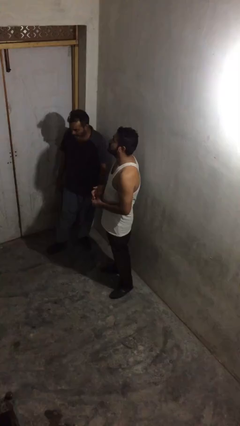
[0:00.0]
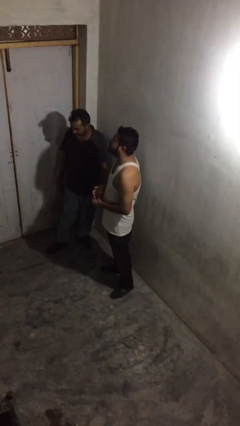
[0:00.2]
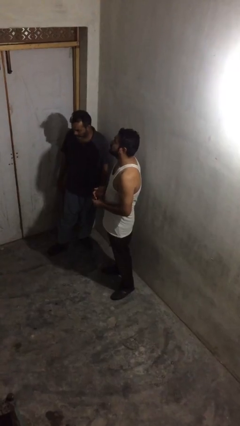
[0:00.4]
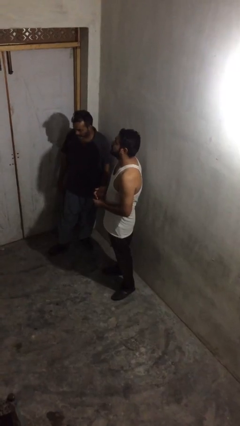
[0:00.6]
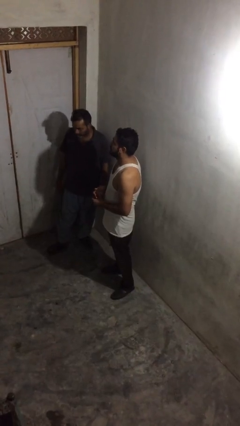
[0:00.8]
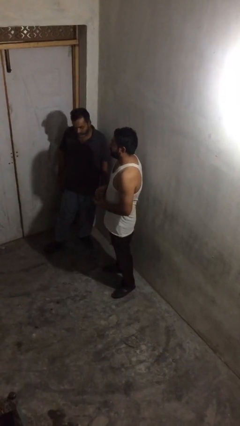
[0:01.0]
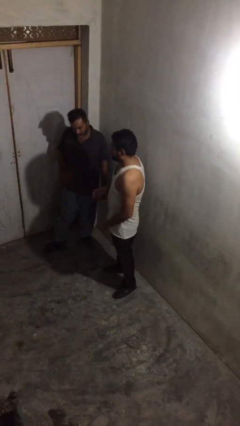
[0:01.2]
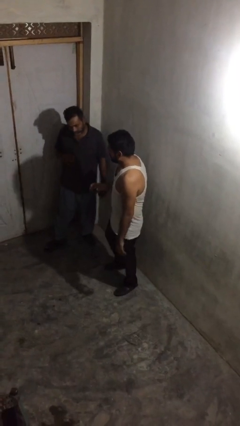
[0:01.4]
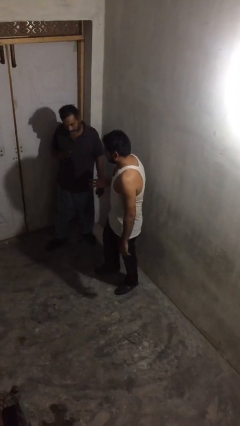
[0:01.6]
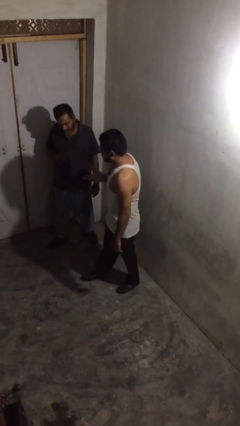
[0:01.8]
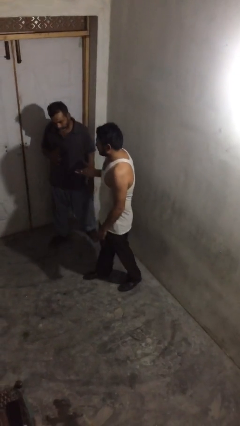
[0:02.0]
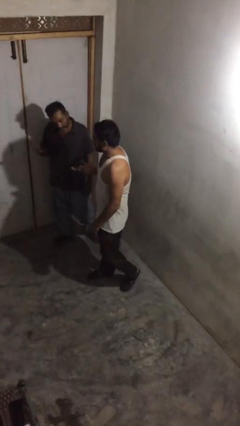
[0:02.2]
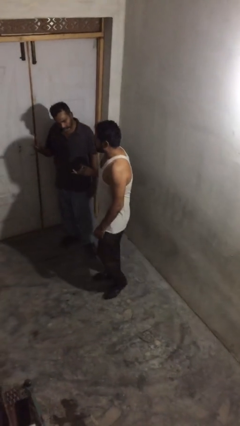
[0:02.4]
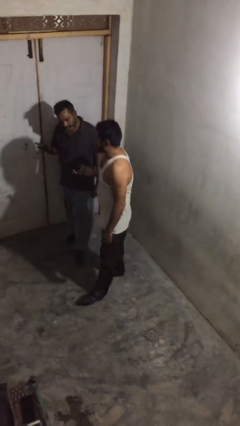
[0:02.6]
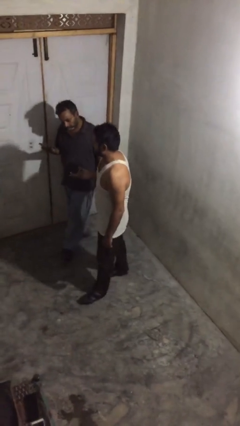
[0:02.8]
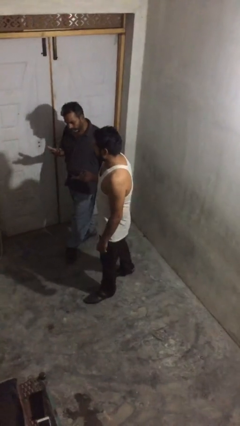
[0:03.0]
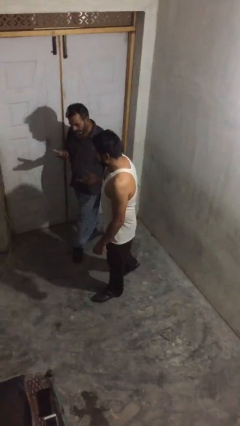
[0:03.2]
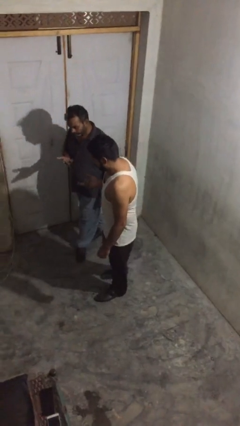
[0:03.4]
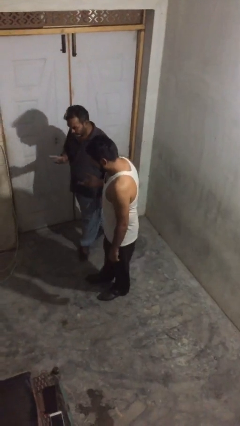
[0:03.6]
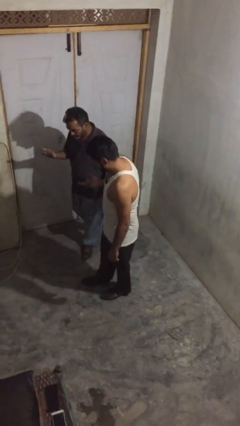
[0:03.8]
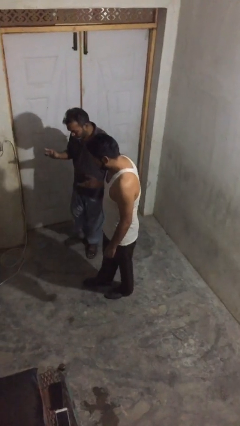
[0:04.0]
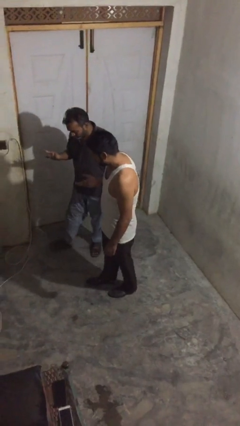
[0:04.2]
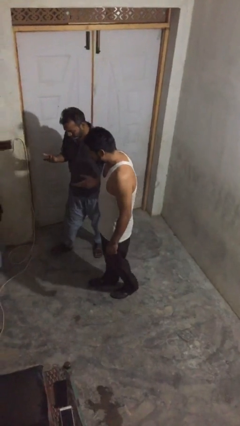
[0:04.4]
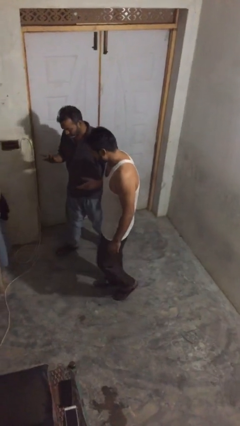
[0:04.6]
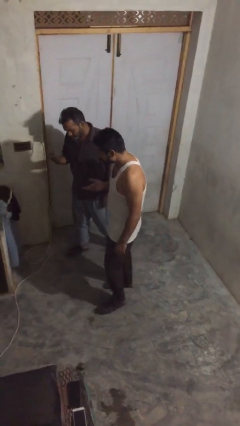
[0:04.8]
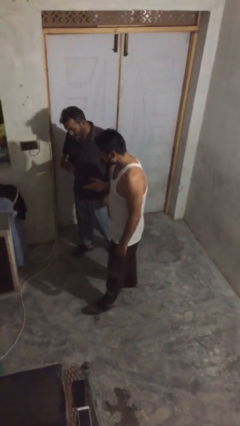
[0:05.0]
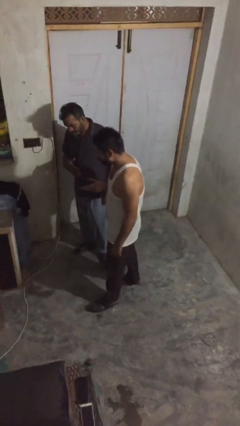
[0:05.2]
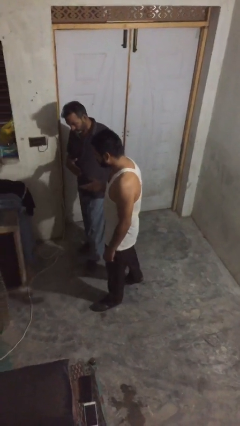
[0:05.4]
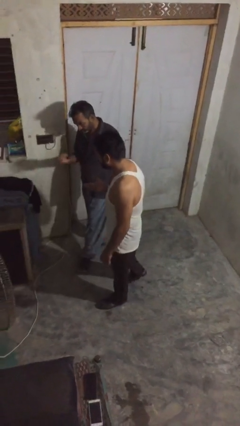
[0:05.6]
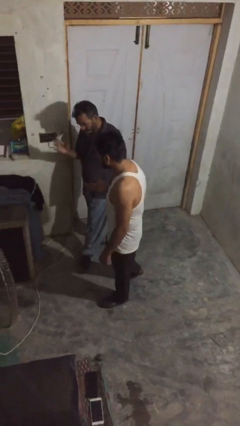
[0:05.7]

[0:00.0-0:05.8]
person talks to person

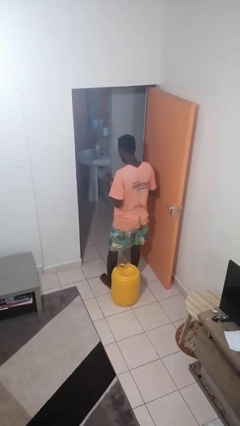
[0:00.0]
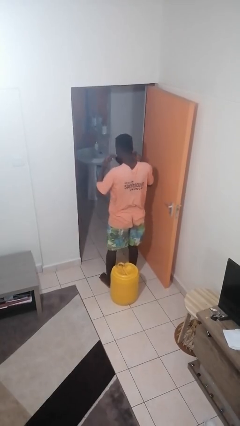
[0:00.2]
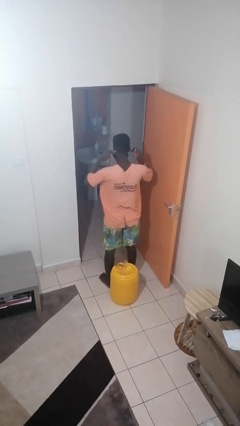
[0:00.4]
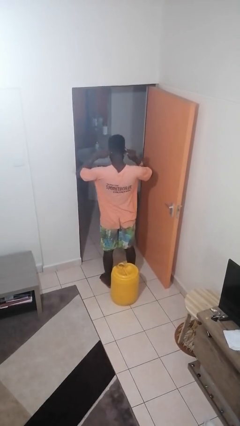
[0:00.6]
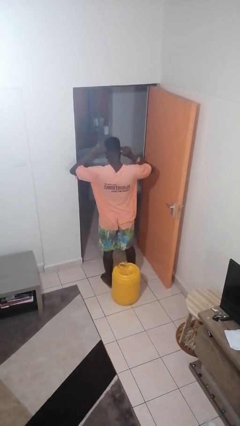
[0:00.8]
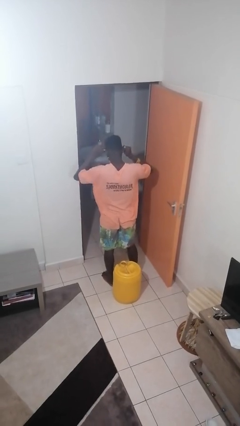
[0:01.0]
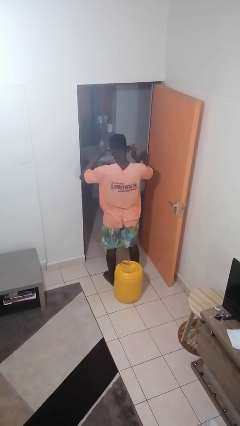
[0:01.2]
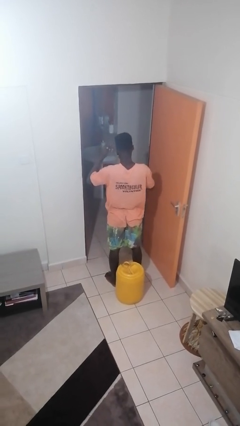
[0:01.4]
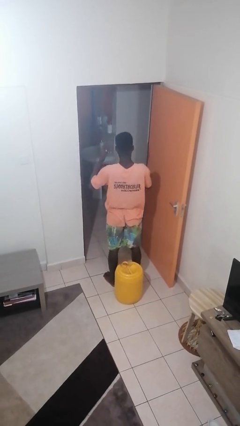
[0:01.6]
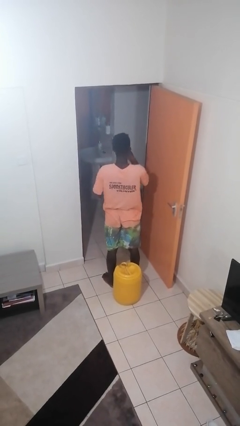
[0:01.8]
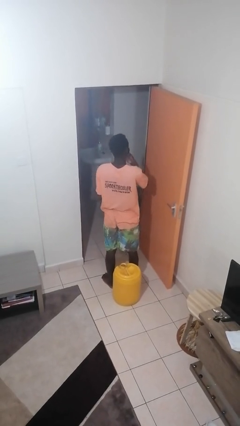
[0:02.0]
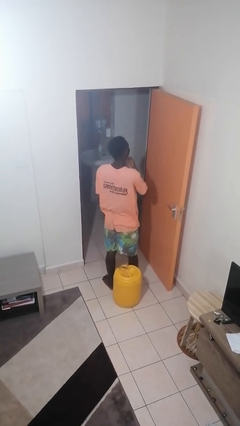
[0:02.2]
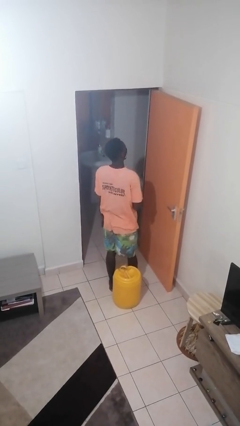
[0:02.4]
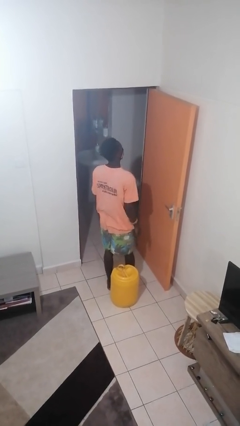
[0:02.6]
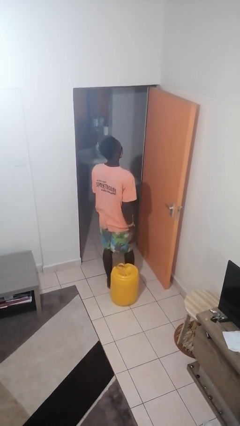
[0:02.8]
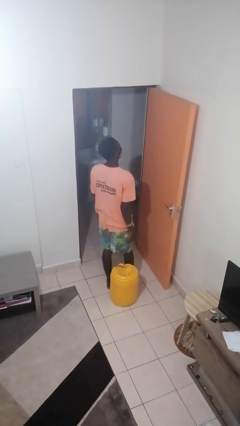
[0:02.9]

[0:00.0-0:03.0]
person puts on facemask

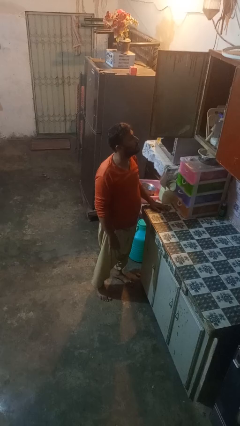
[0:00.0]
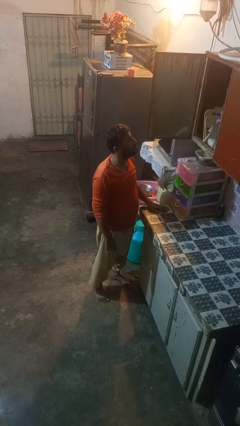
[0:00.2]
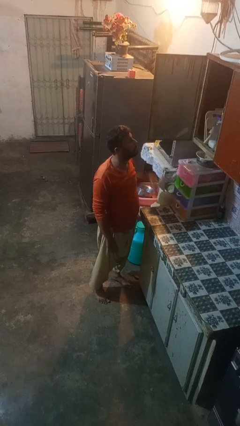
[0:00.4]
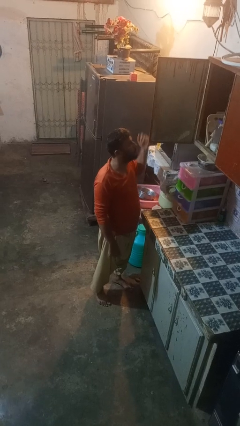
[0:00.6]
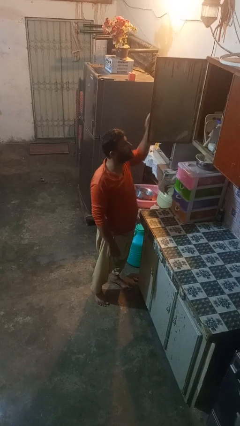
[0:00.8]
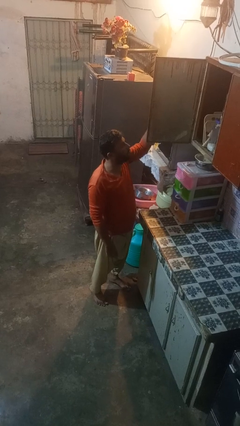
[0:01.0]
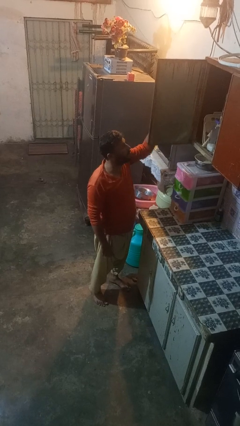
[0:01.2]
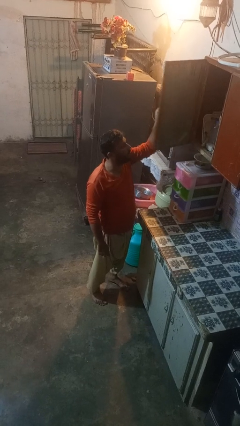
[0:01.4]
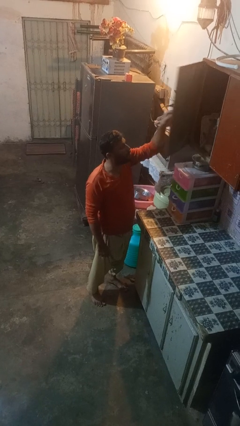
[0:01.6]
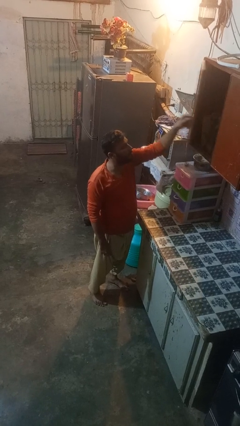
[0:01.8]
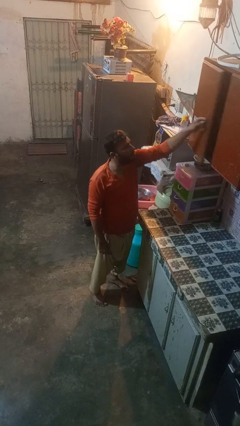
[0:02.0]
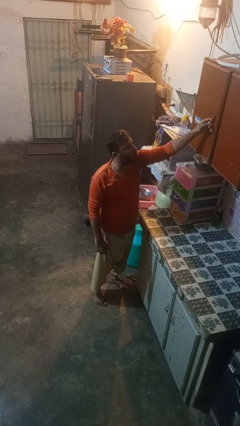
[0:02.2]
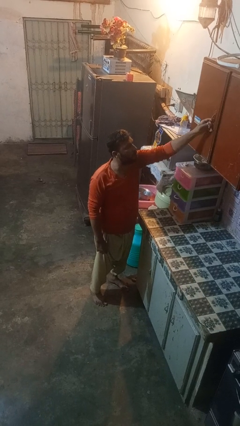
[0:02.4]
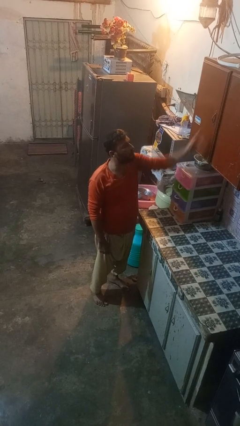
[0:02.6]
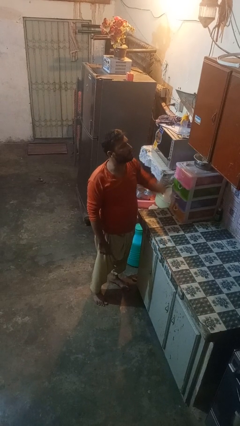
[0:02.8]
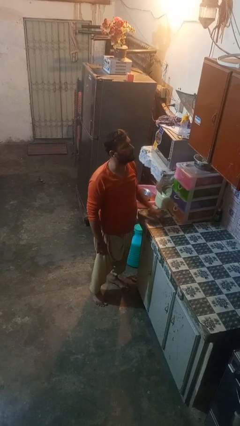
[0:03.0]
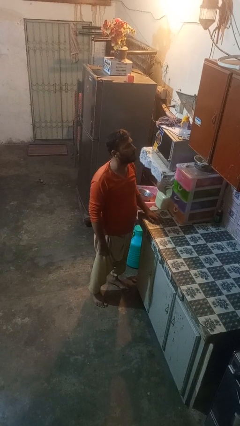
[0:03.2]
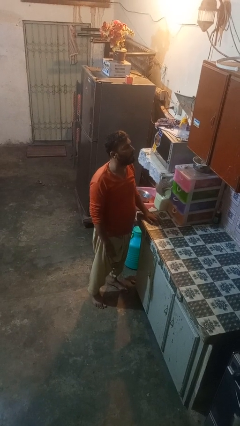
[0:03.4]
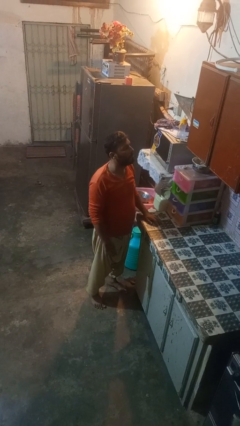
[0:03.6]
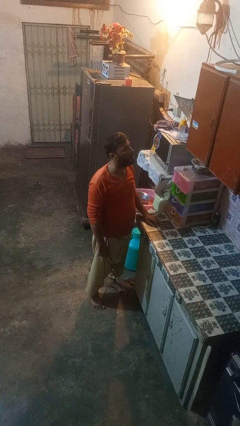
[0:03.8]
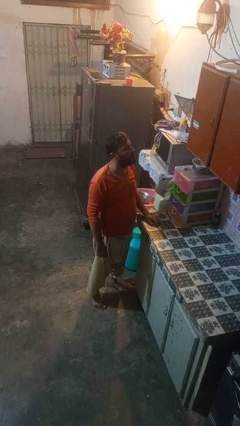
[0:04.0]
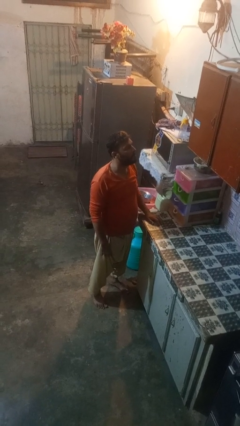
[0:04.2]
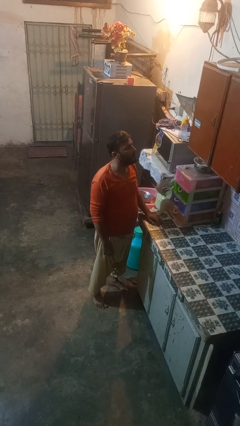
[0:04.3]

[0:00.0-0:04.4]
person closes cabinet

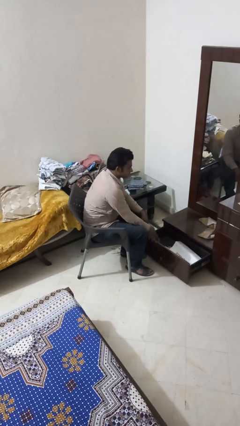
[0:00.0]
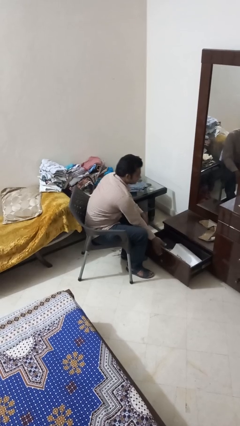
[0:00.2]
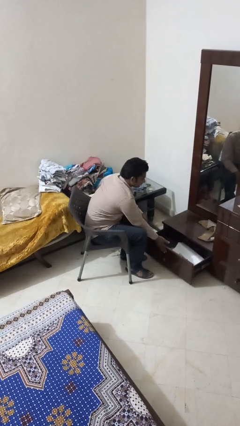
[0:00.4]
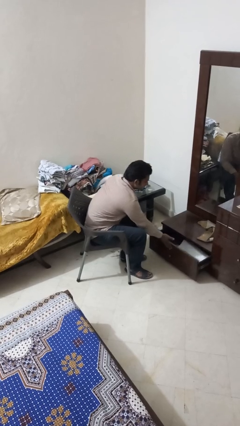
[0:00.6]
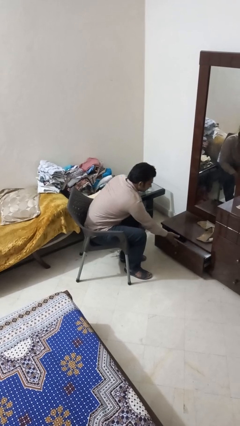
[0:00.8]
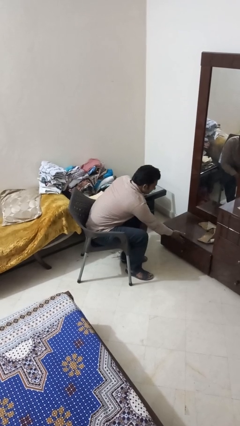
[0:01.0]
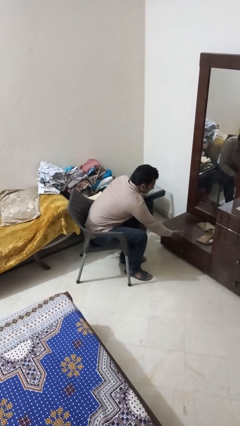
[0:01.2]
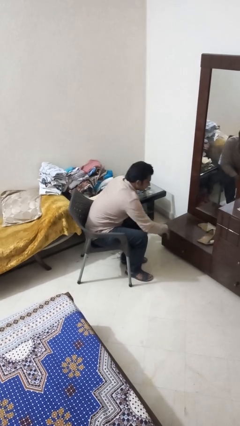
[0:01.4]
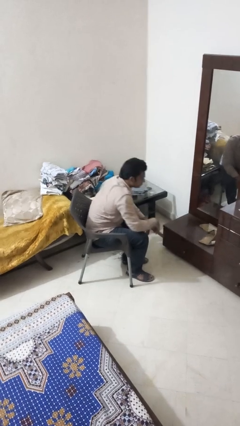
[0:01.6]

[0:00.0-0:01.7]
person closes dresser drawer

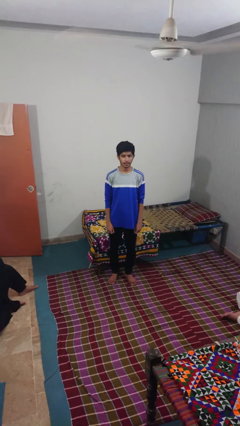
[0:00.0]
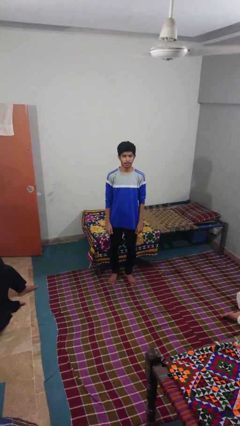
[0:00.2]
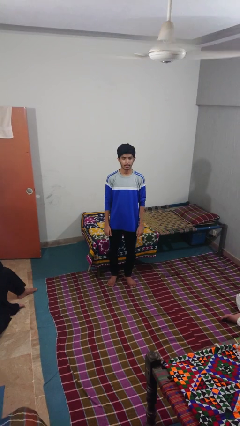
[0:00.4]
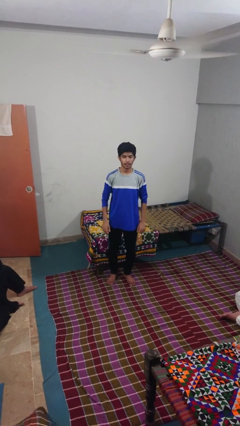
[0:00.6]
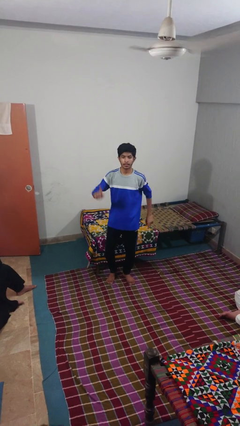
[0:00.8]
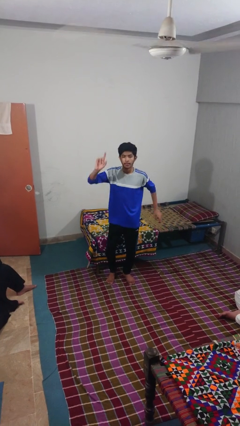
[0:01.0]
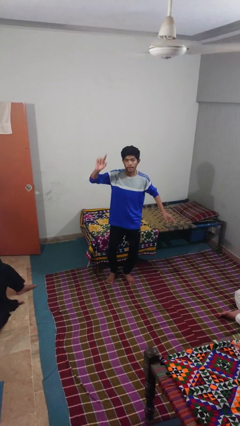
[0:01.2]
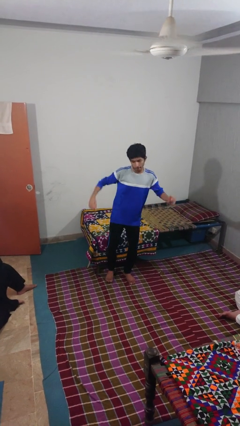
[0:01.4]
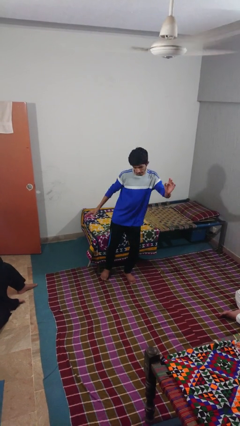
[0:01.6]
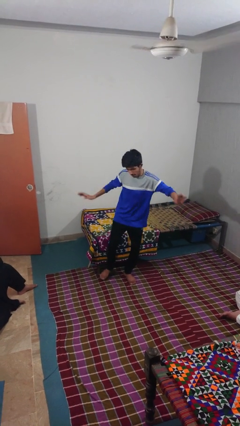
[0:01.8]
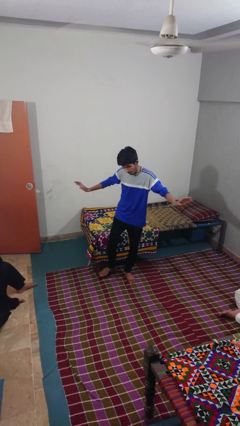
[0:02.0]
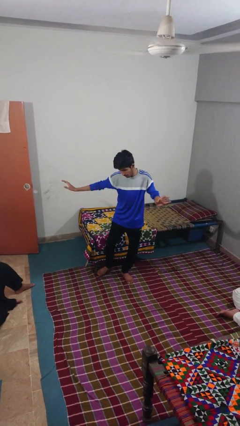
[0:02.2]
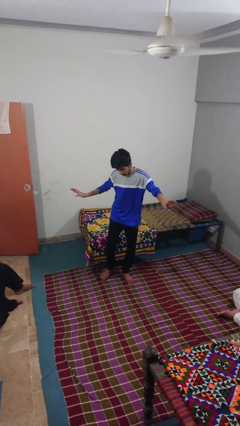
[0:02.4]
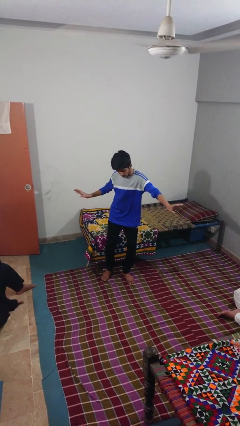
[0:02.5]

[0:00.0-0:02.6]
person dances in place

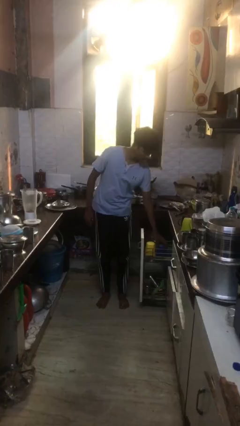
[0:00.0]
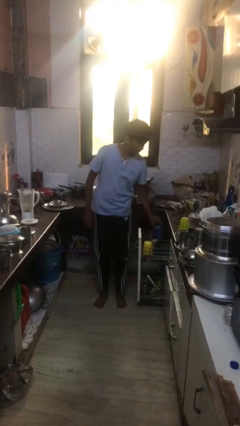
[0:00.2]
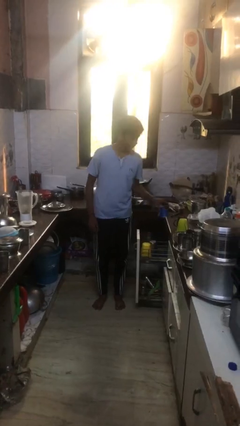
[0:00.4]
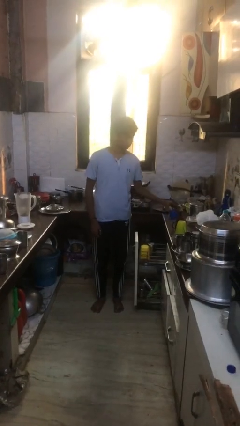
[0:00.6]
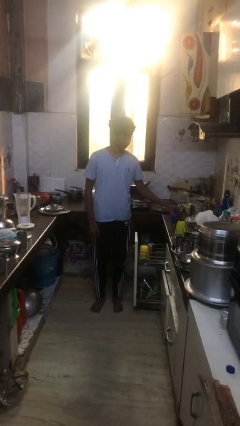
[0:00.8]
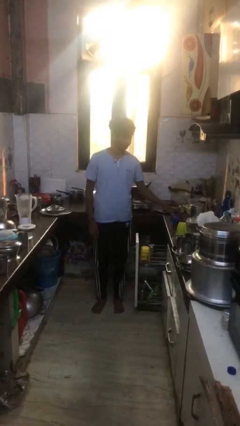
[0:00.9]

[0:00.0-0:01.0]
person unloads dishwasher
